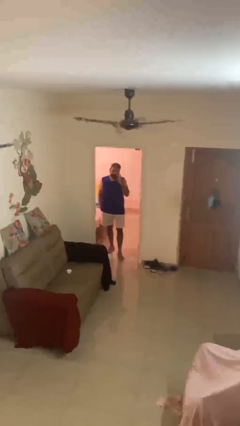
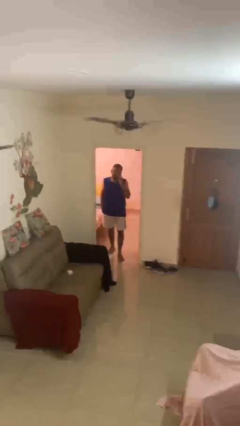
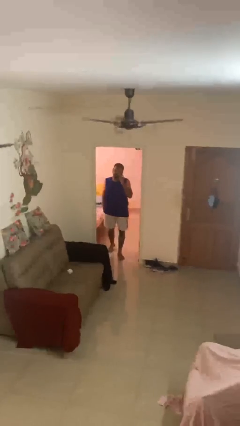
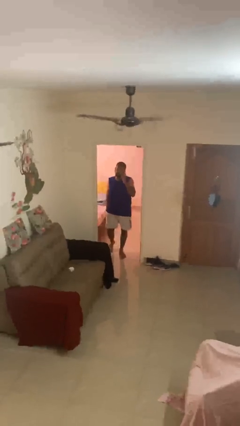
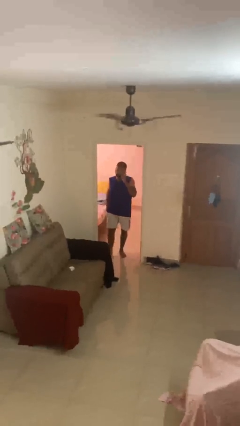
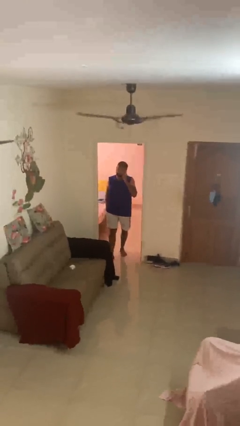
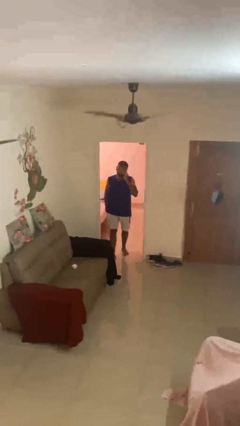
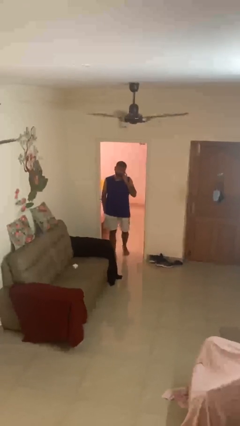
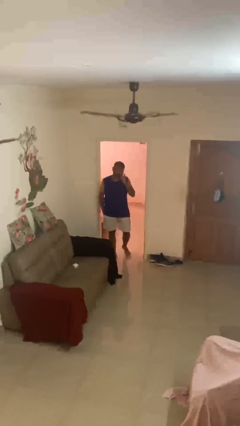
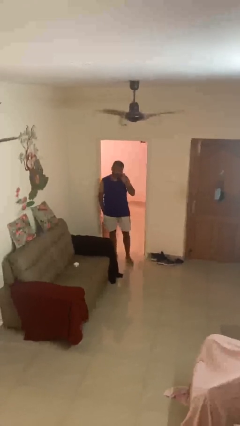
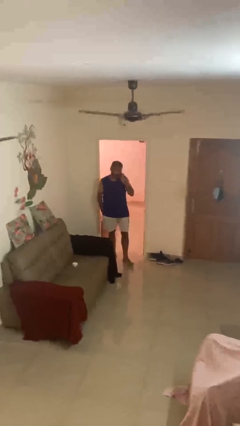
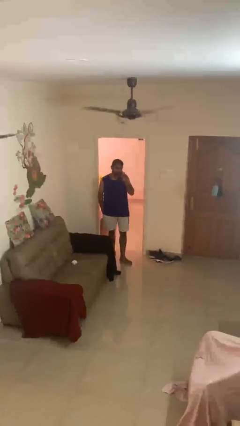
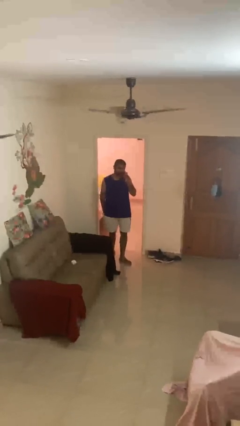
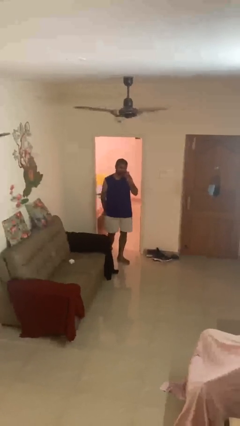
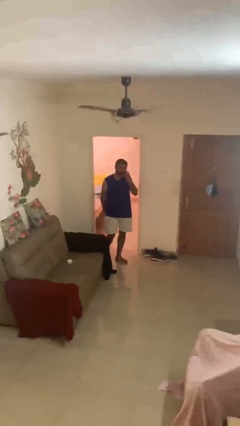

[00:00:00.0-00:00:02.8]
person enters scene through structure

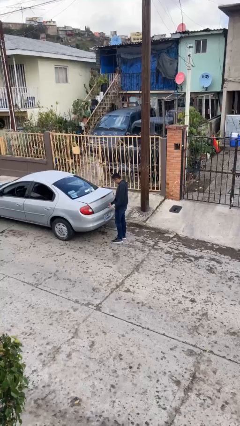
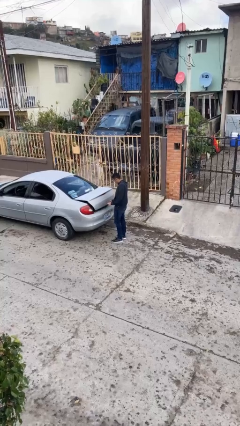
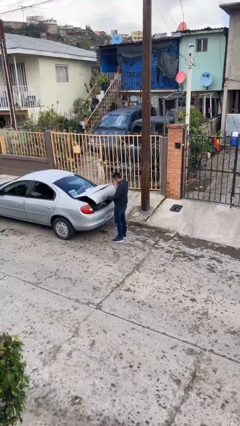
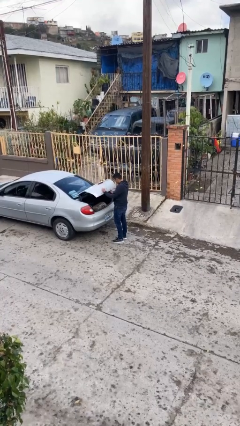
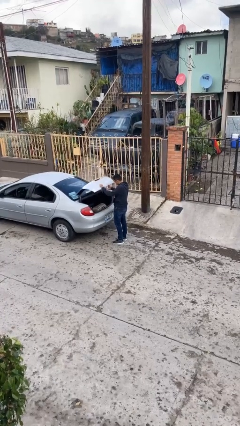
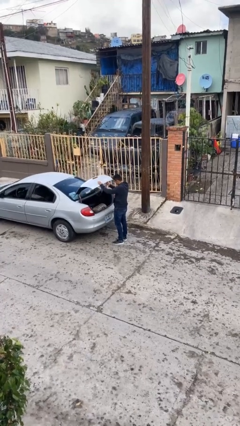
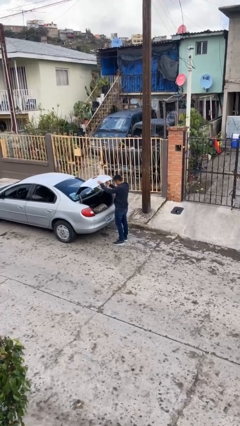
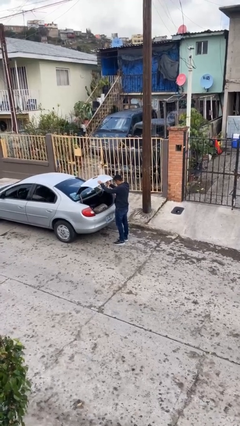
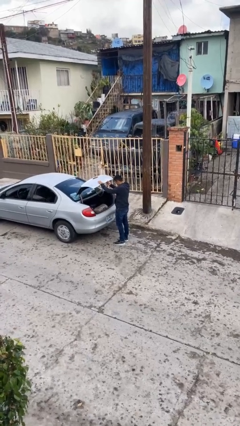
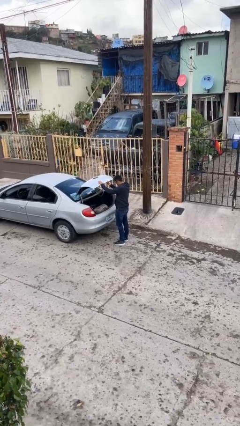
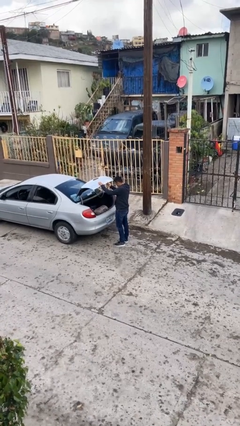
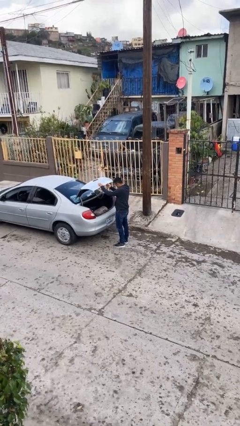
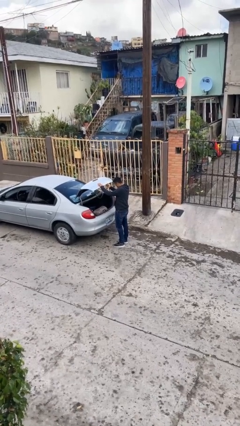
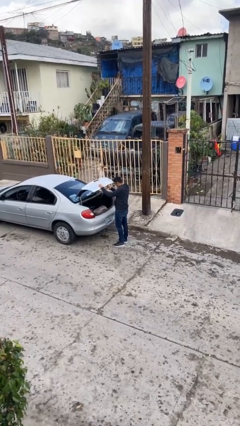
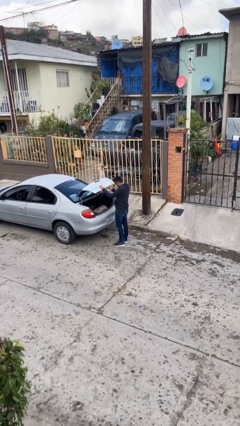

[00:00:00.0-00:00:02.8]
person opens car trunk

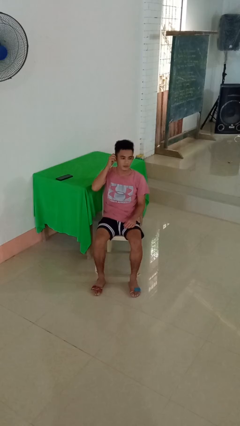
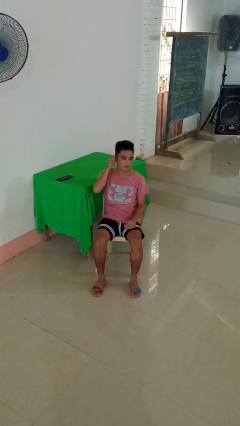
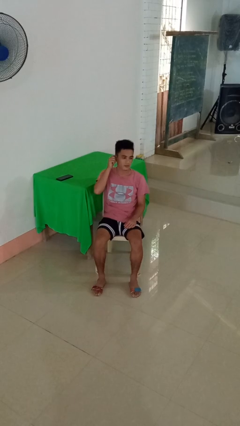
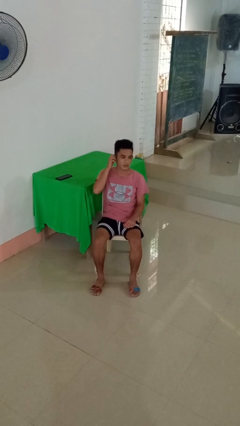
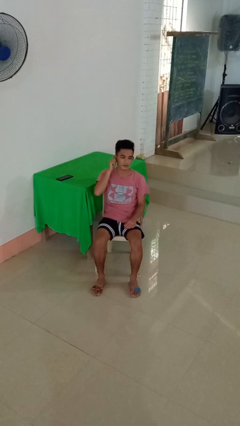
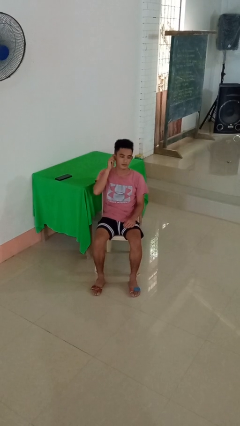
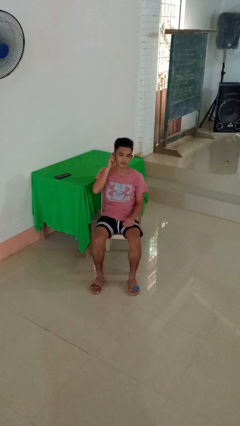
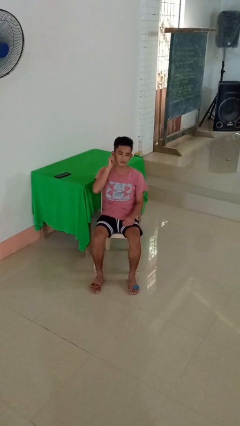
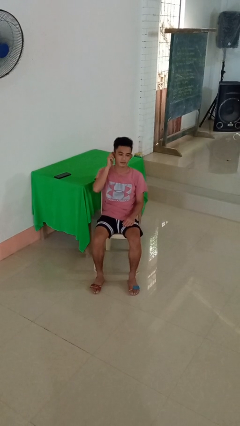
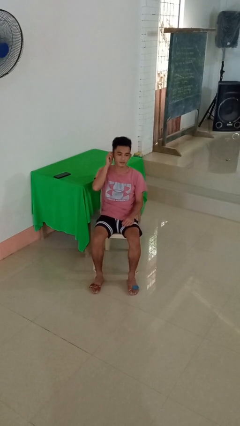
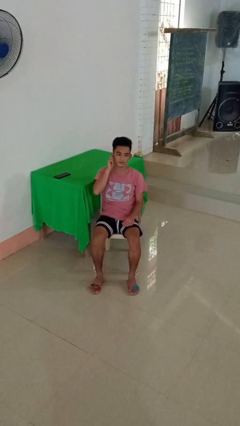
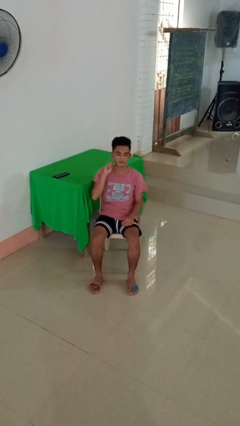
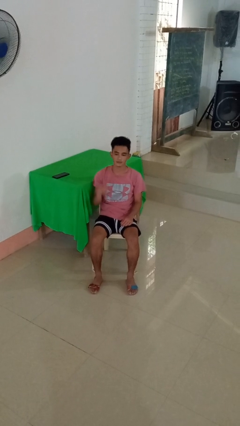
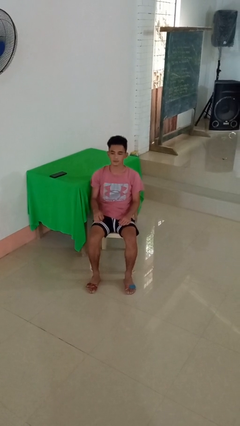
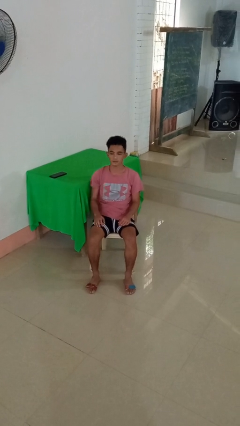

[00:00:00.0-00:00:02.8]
person touches earlobe

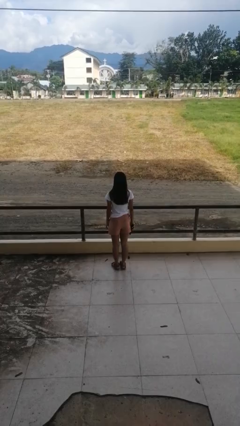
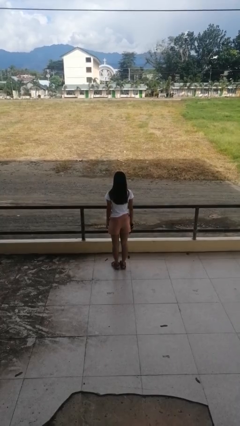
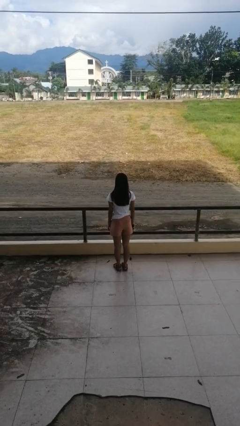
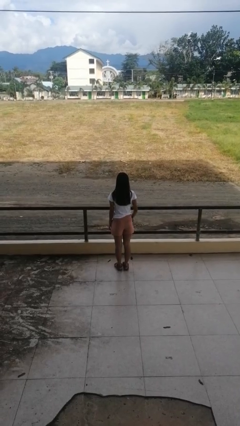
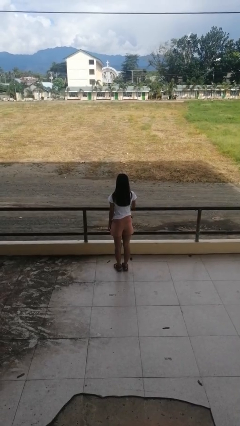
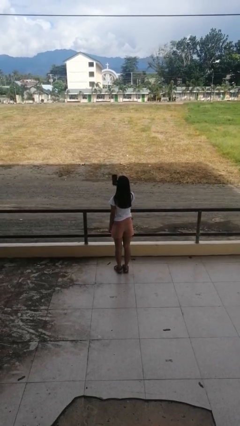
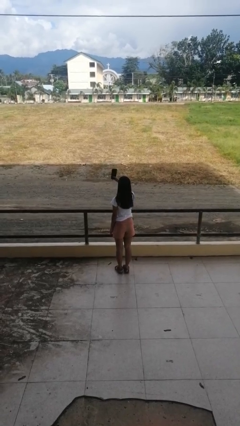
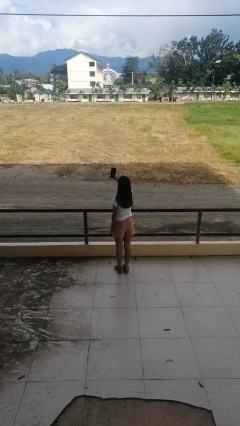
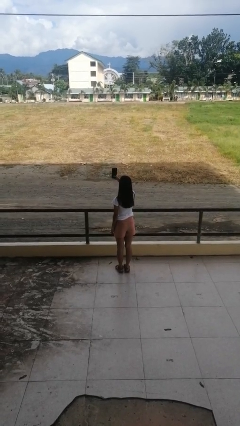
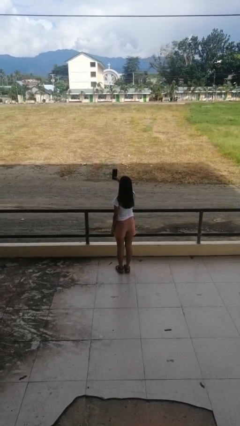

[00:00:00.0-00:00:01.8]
person takes selfie

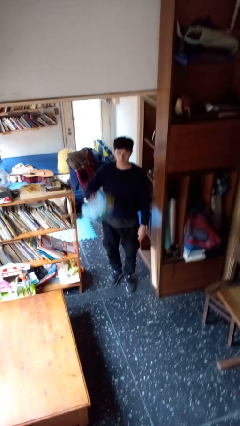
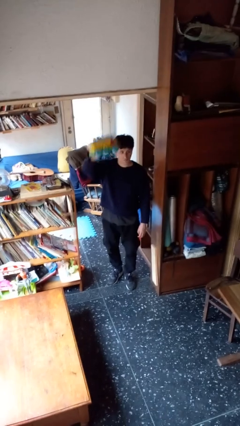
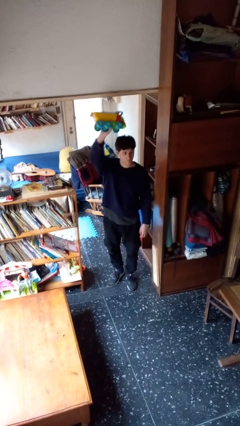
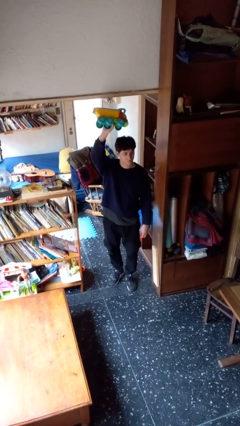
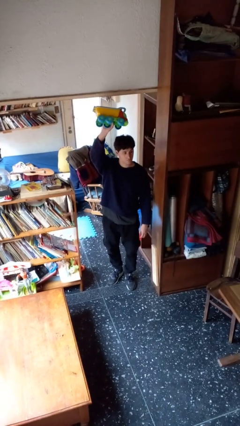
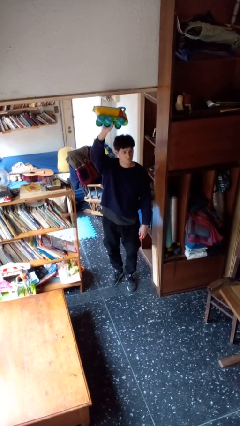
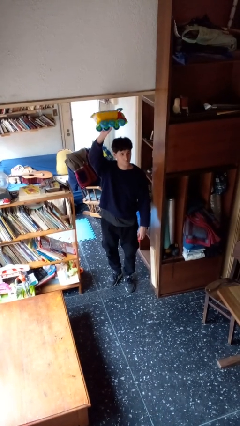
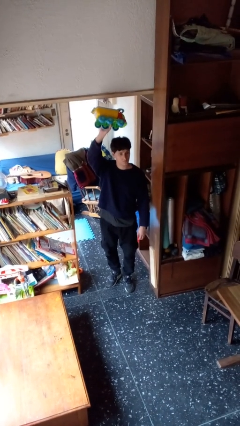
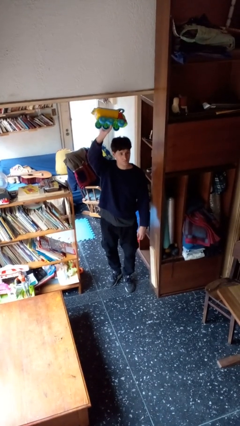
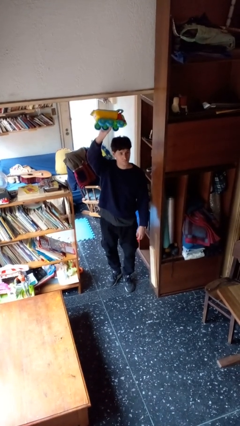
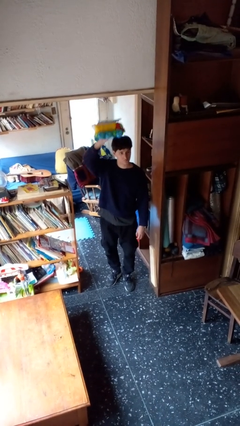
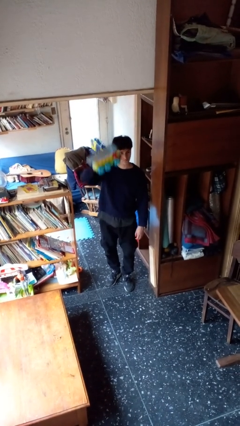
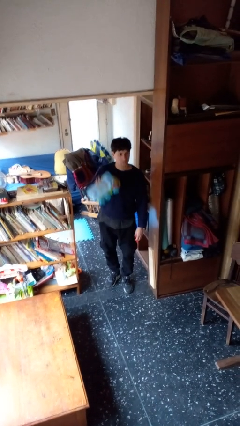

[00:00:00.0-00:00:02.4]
person holds object above head

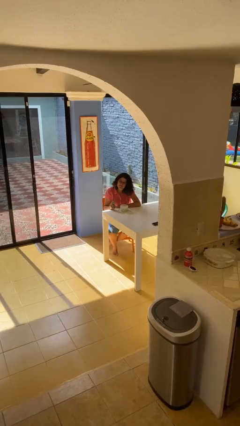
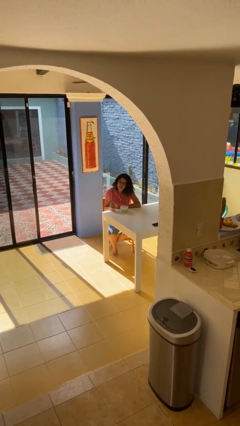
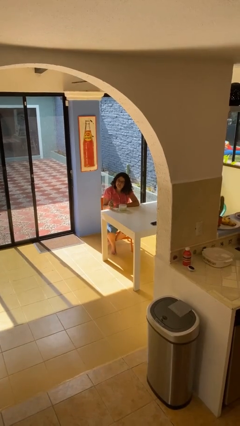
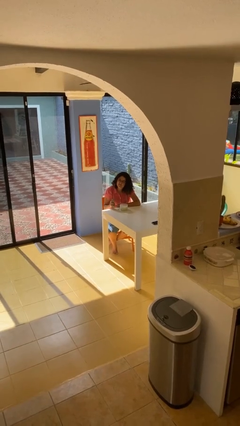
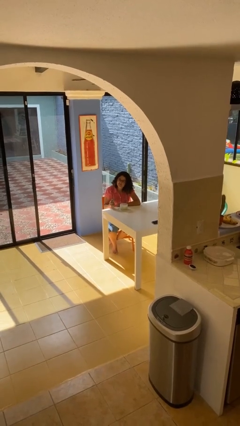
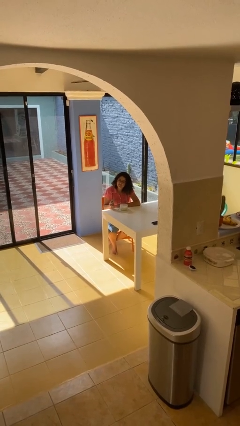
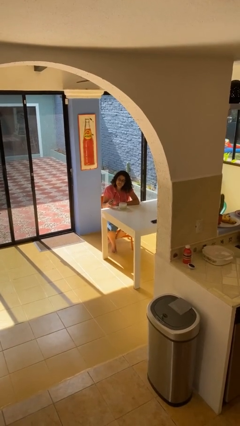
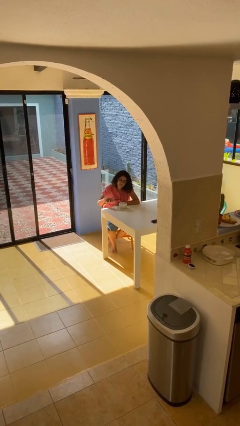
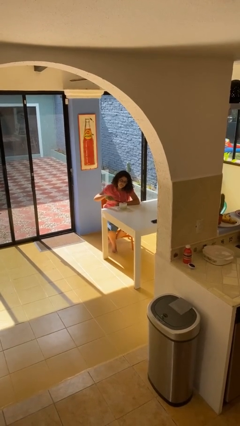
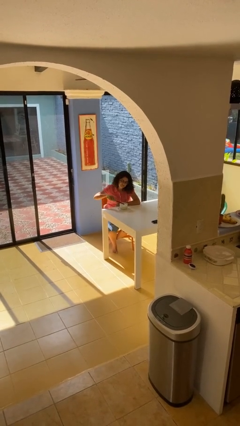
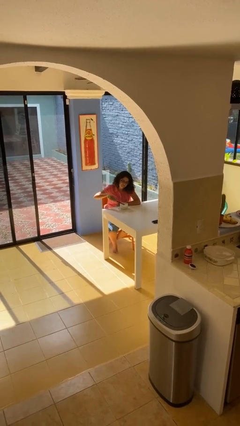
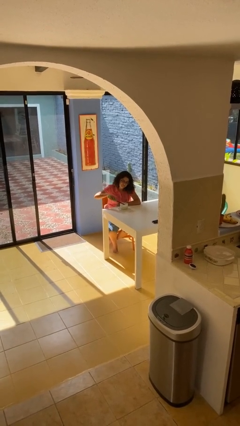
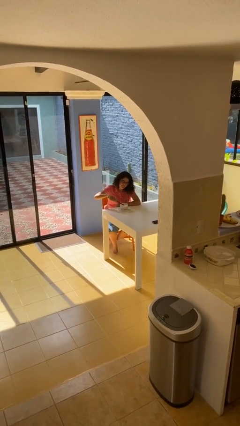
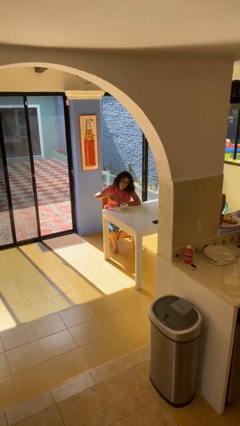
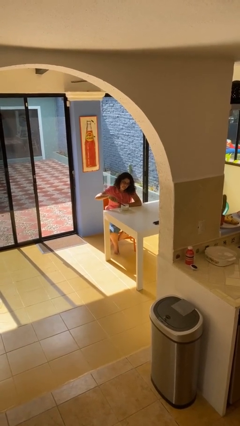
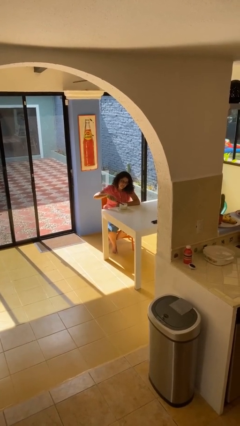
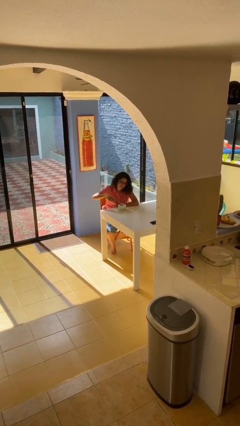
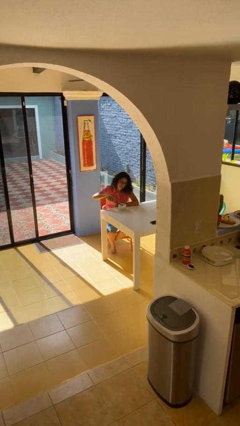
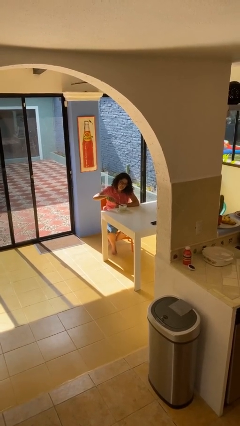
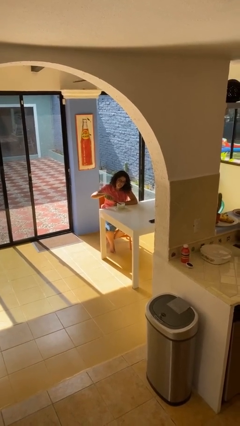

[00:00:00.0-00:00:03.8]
person lights candle

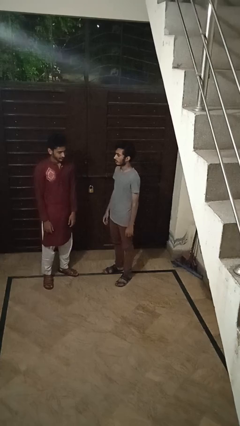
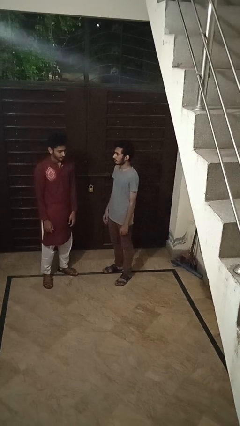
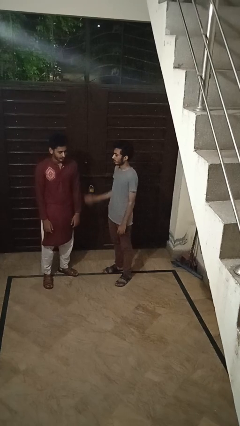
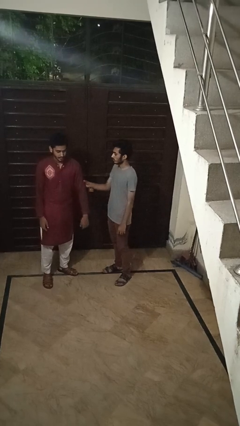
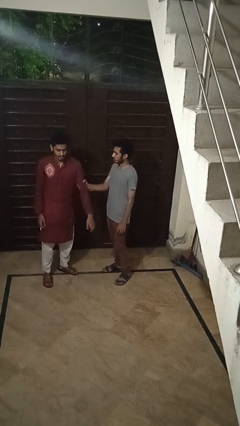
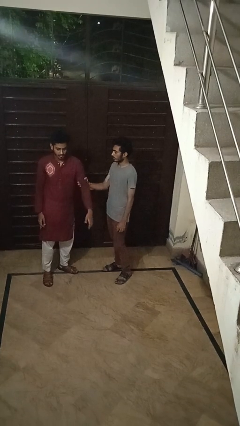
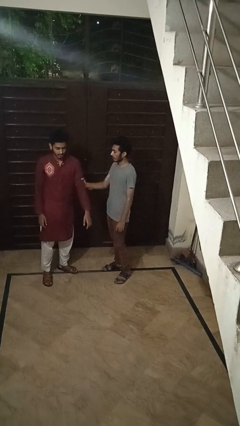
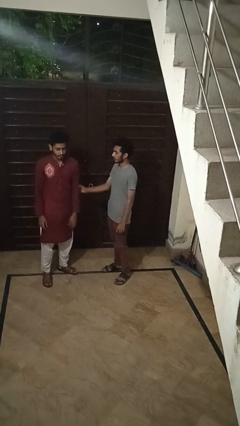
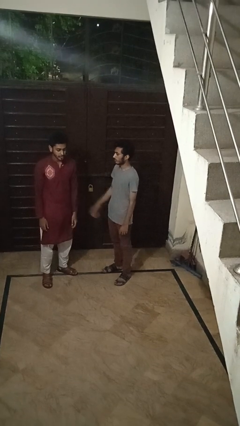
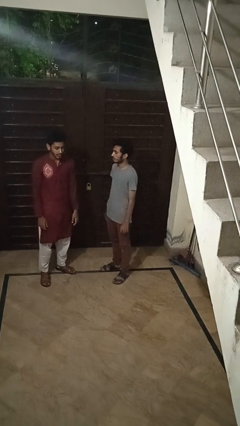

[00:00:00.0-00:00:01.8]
person grabs person by bicep
